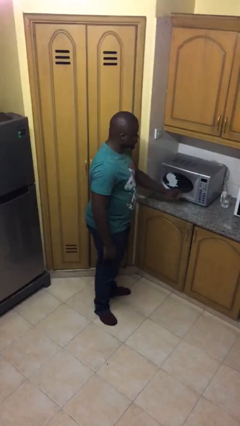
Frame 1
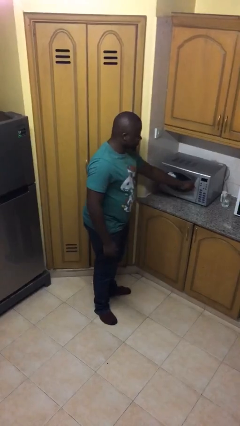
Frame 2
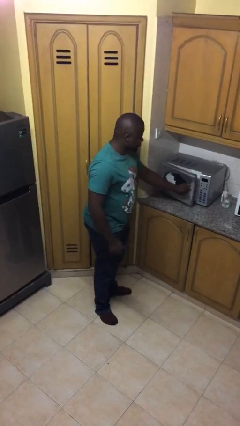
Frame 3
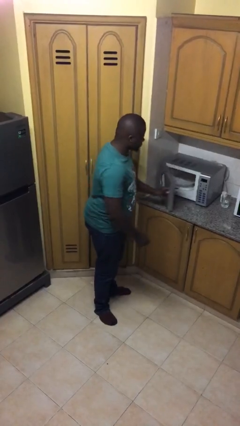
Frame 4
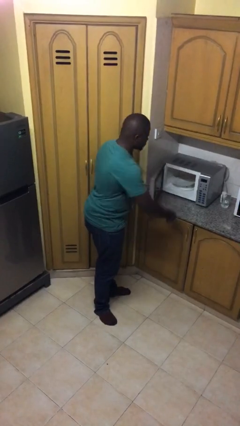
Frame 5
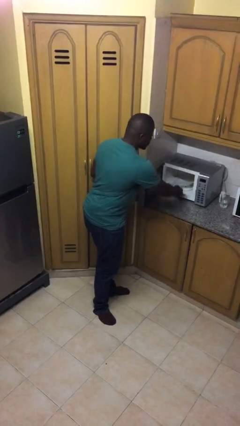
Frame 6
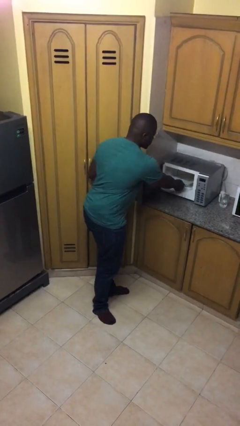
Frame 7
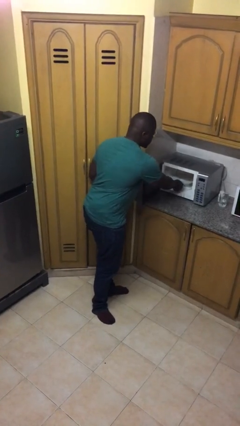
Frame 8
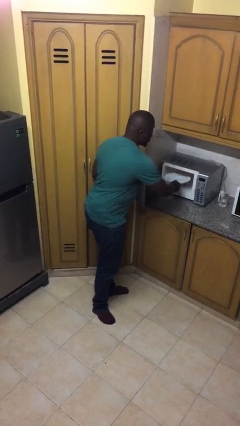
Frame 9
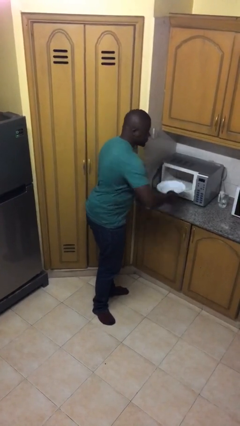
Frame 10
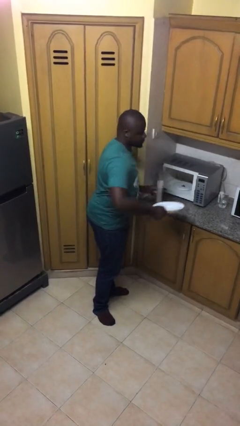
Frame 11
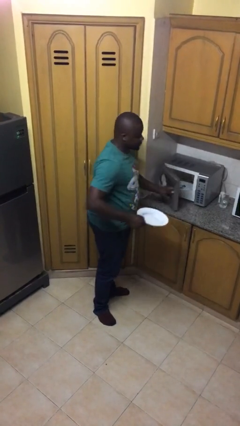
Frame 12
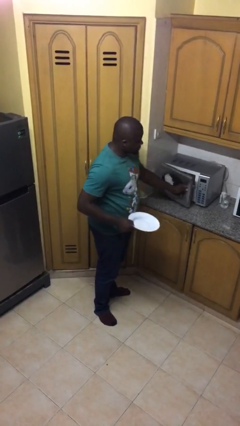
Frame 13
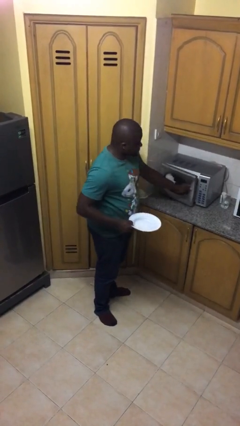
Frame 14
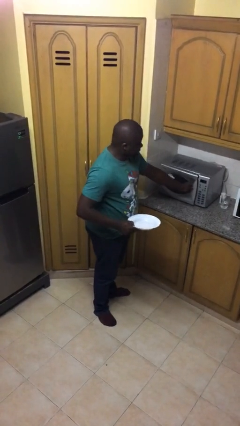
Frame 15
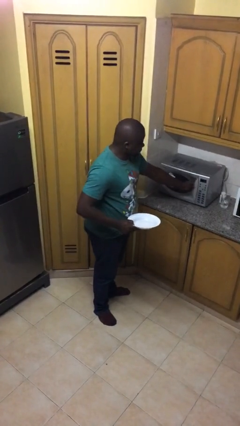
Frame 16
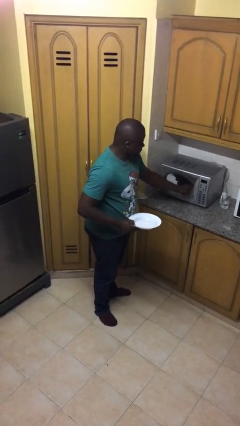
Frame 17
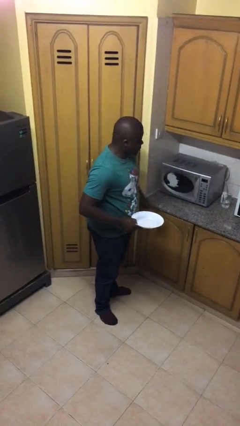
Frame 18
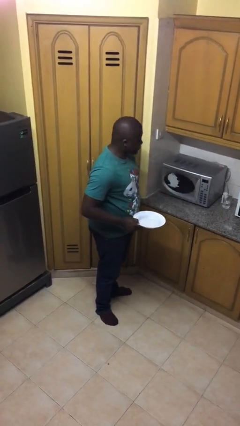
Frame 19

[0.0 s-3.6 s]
person takes object from microwave

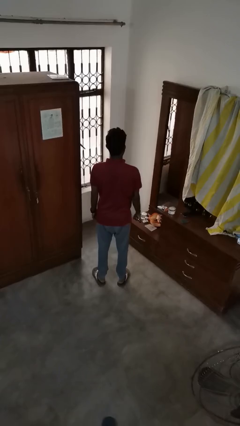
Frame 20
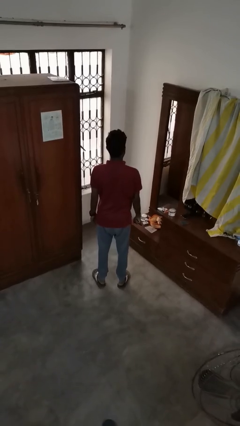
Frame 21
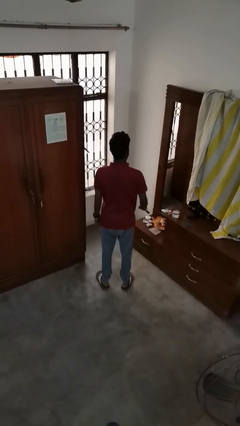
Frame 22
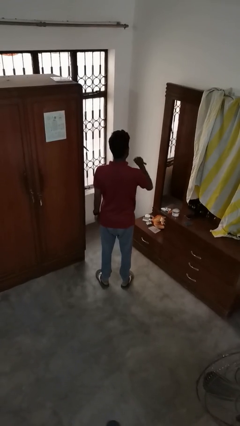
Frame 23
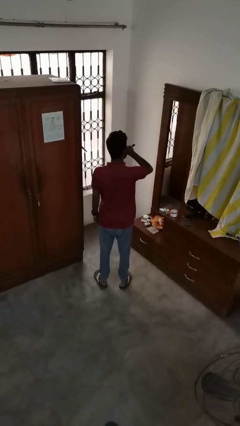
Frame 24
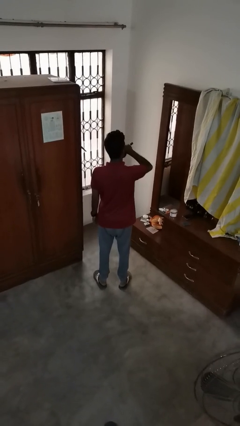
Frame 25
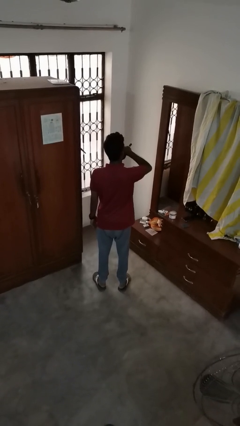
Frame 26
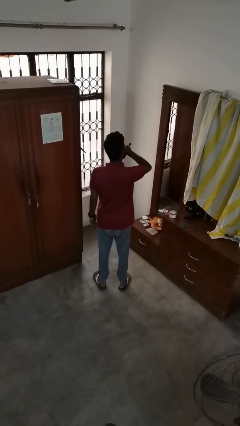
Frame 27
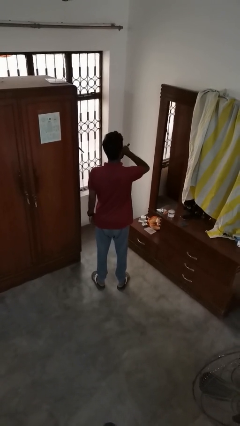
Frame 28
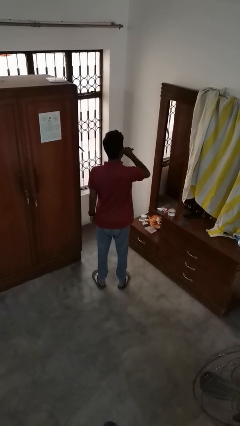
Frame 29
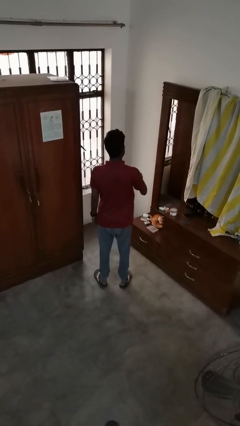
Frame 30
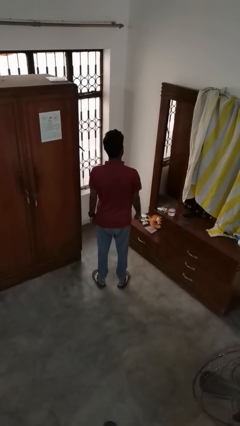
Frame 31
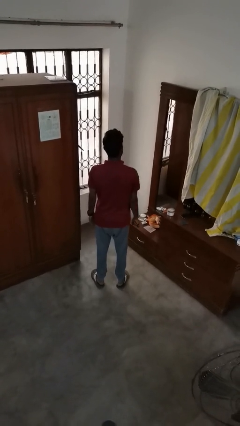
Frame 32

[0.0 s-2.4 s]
person vapes

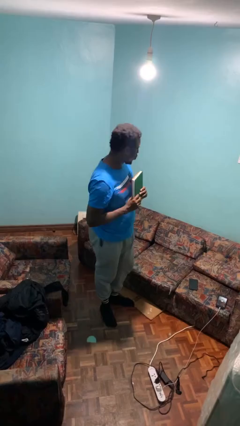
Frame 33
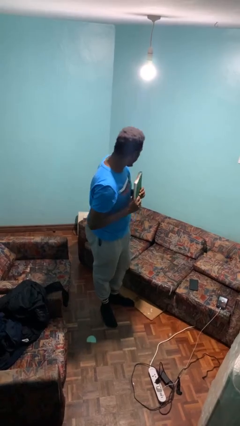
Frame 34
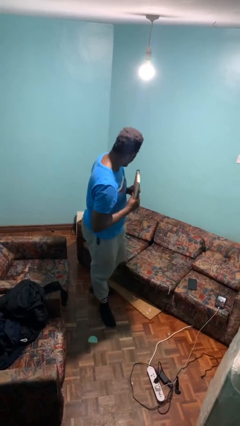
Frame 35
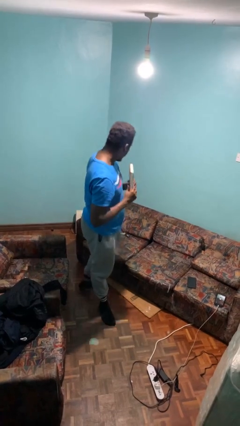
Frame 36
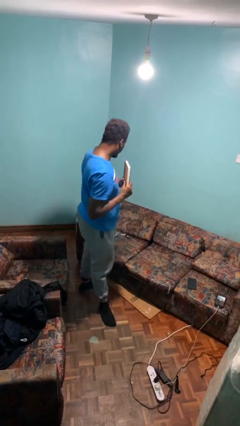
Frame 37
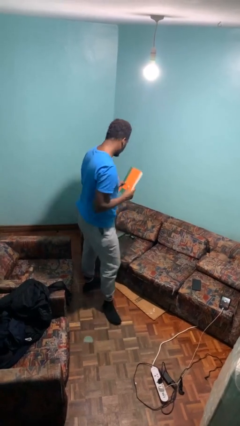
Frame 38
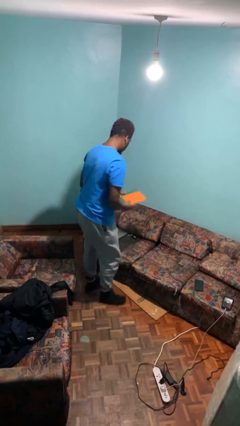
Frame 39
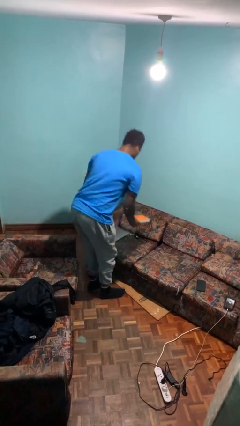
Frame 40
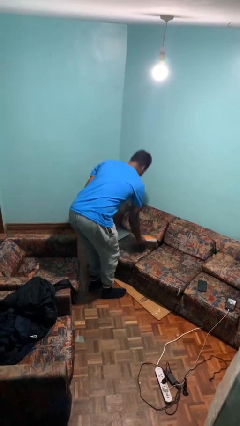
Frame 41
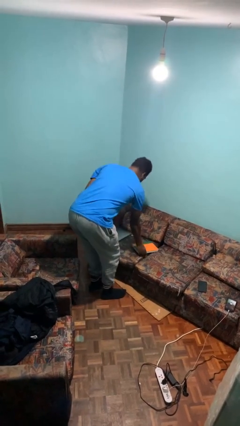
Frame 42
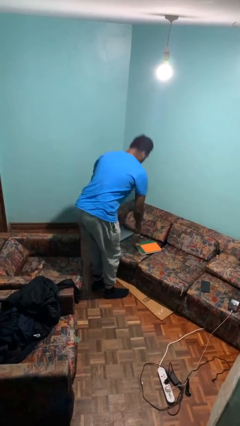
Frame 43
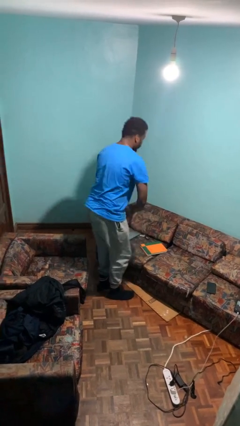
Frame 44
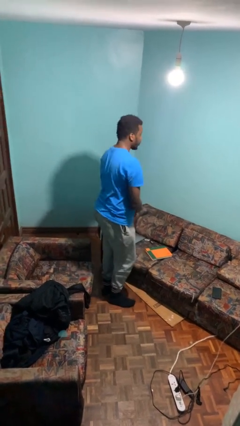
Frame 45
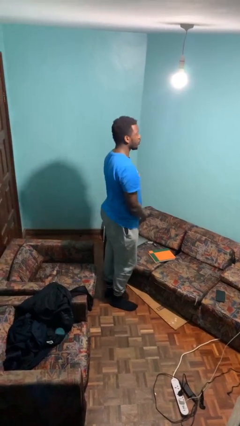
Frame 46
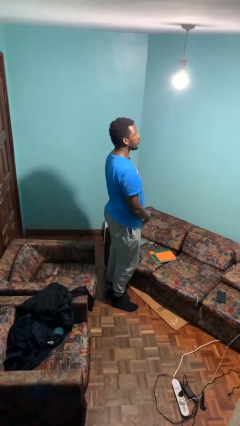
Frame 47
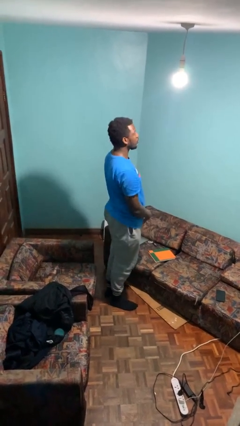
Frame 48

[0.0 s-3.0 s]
person puts down object on couch

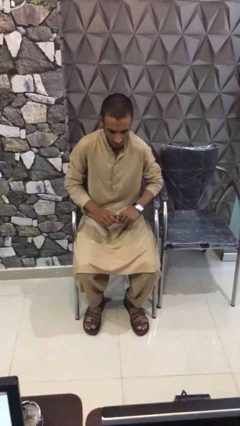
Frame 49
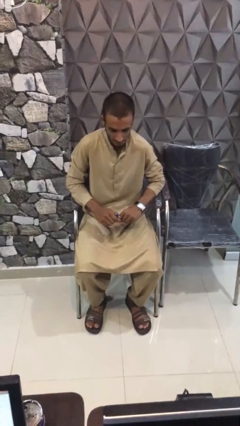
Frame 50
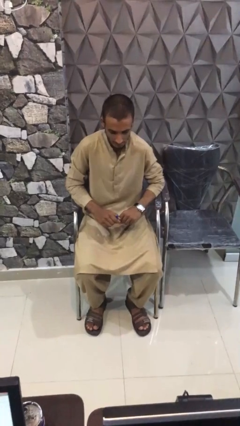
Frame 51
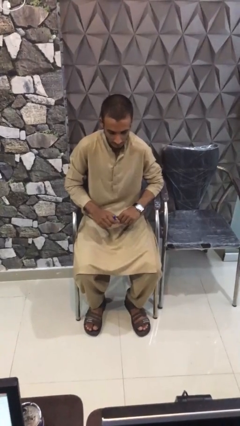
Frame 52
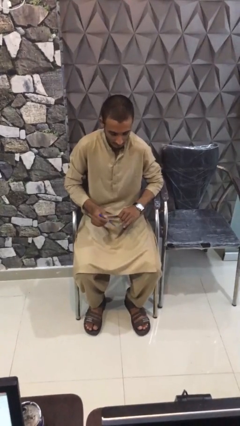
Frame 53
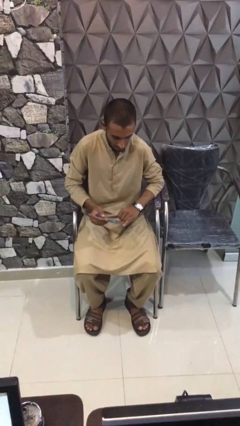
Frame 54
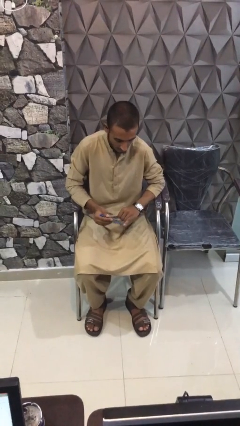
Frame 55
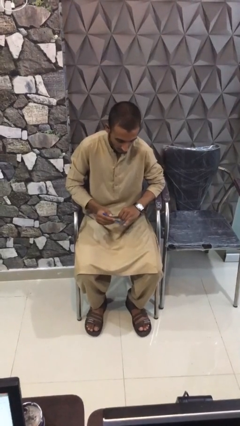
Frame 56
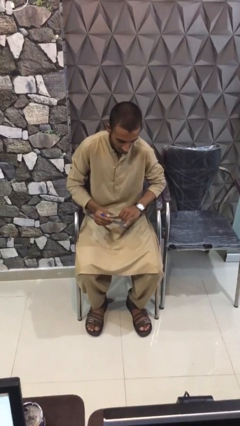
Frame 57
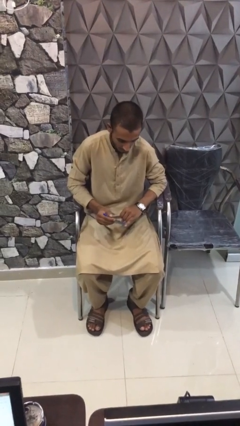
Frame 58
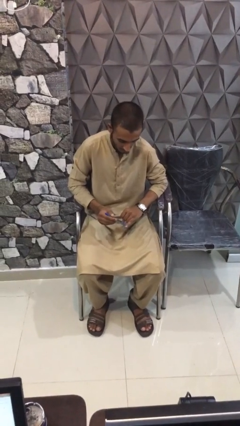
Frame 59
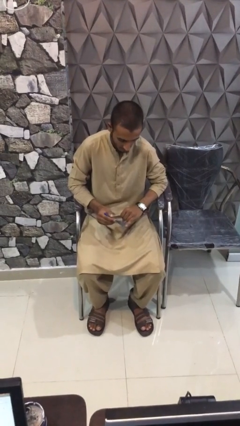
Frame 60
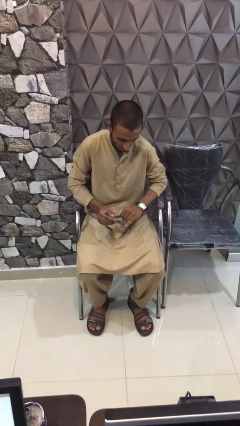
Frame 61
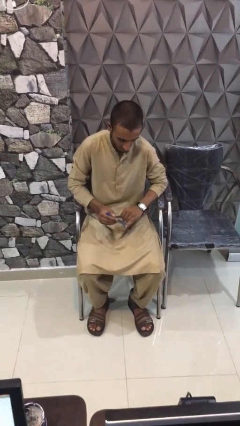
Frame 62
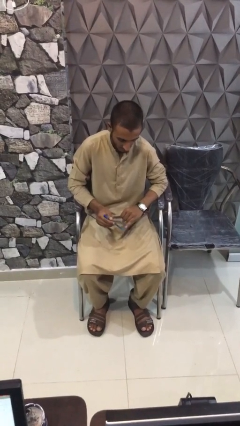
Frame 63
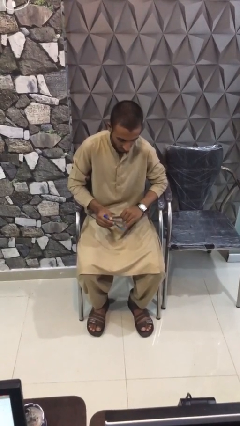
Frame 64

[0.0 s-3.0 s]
person paints fingernails

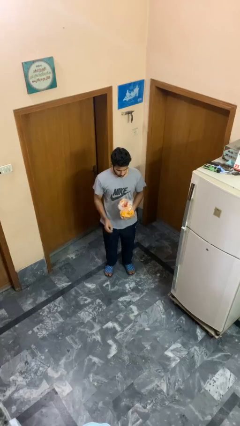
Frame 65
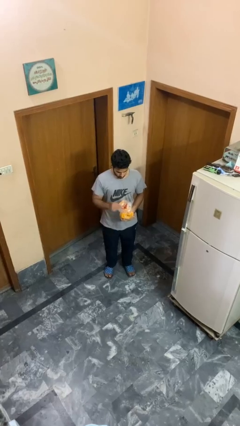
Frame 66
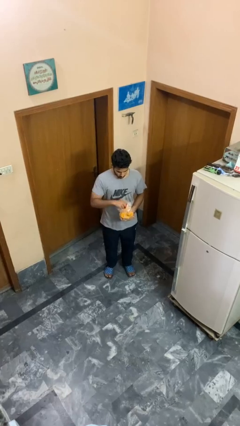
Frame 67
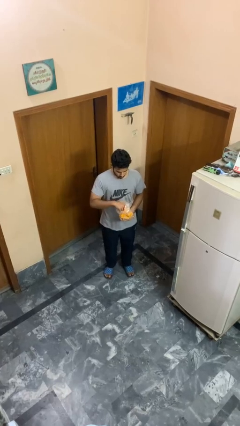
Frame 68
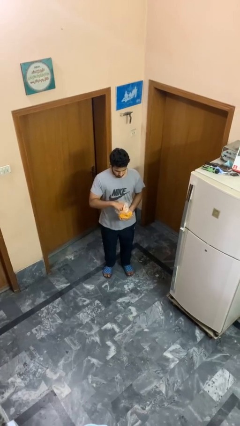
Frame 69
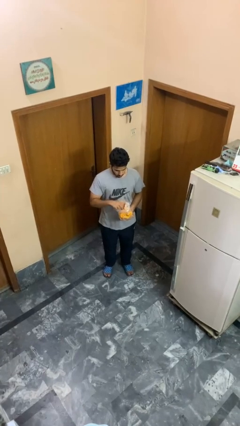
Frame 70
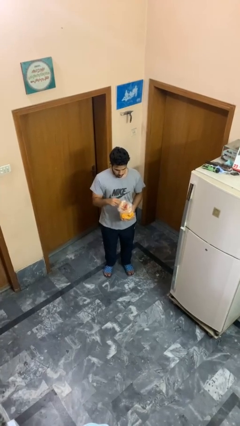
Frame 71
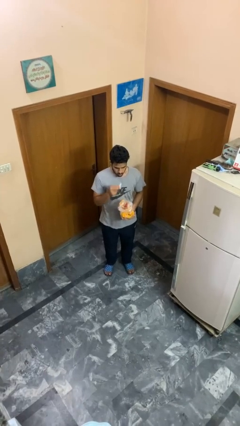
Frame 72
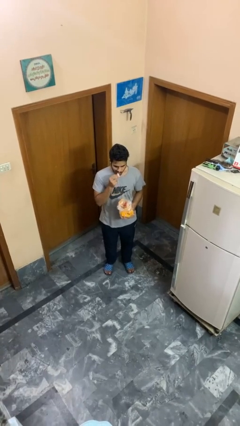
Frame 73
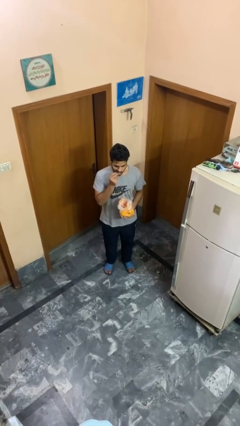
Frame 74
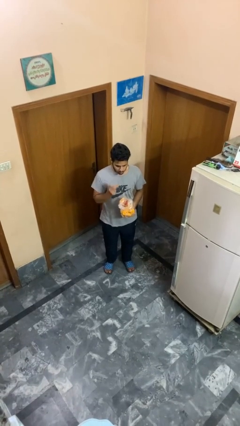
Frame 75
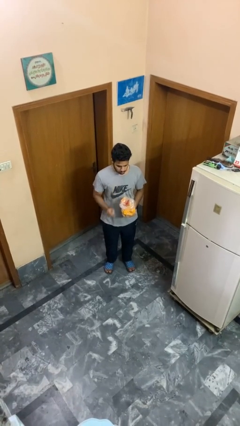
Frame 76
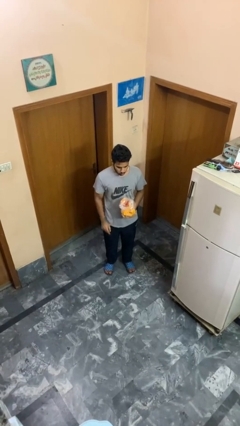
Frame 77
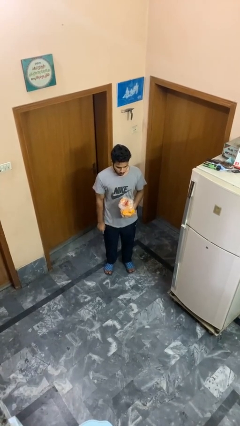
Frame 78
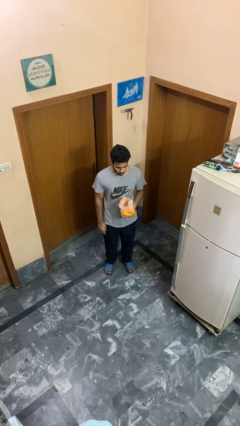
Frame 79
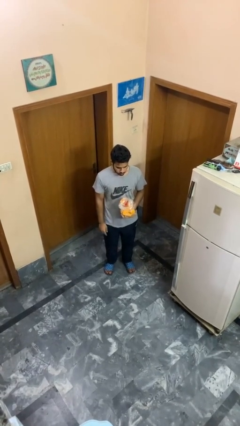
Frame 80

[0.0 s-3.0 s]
person eats snack from bag

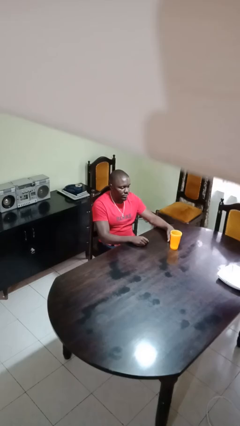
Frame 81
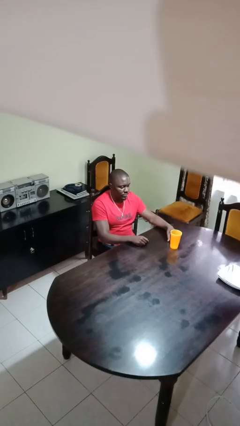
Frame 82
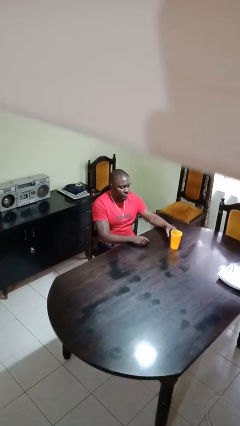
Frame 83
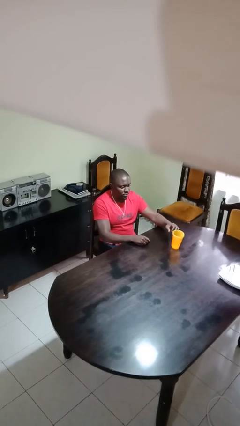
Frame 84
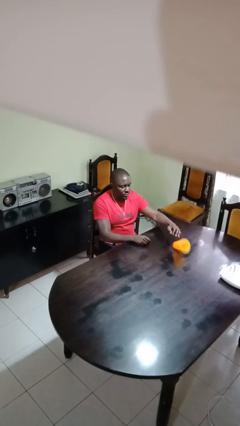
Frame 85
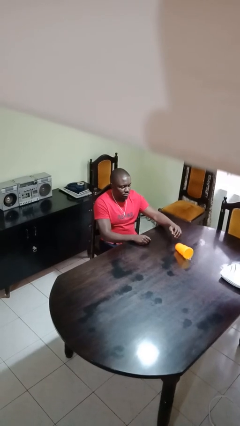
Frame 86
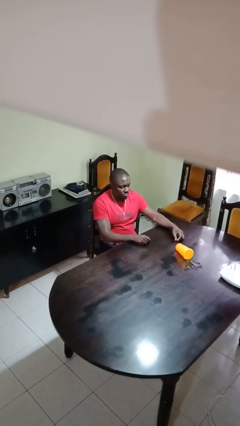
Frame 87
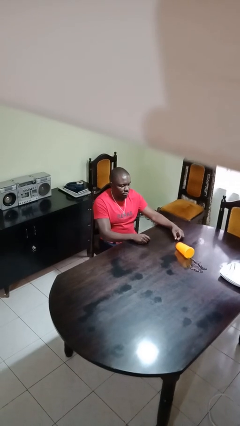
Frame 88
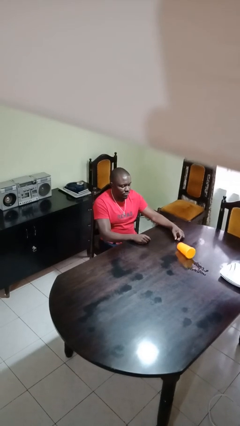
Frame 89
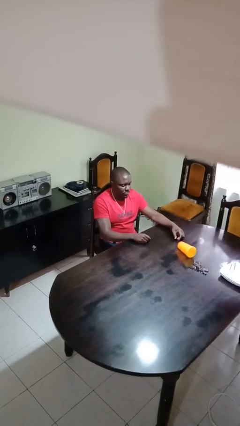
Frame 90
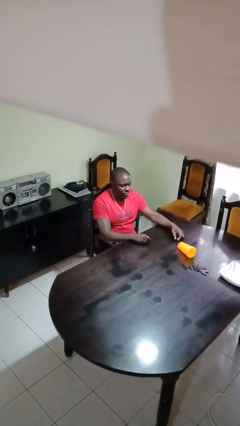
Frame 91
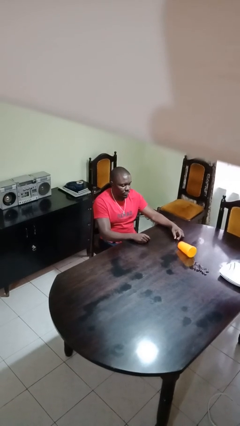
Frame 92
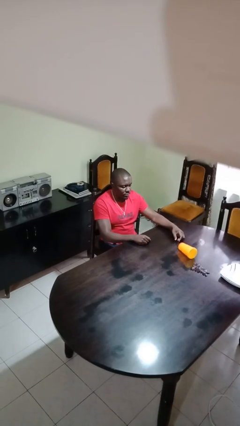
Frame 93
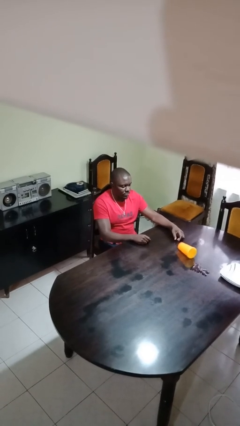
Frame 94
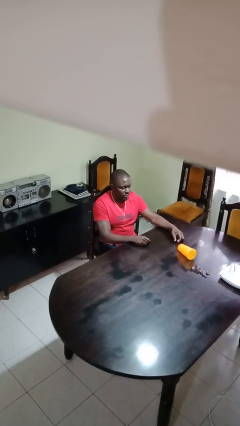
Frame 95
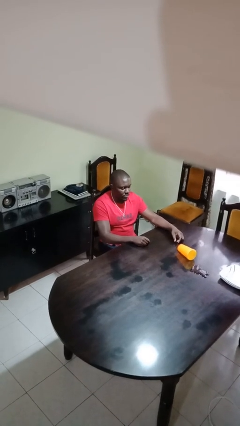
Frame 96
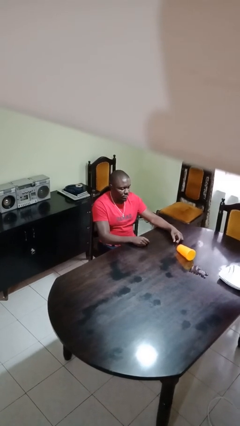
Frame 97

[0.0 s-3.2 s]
person spills on table
